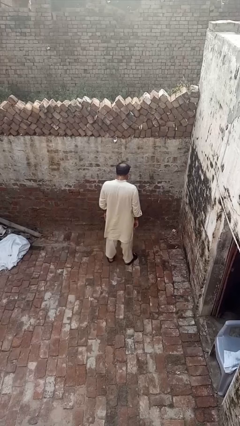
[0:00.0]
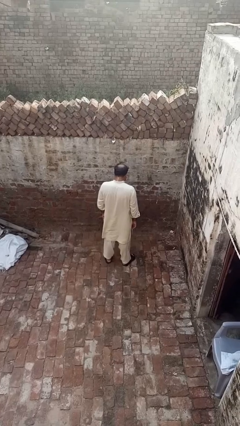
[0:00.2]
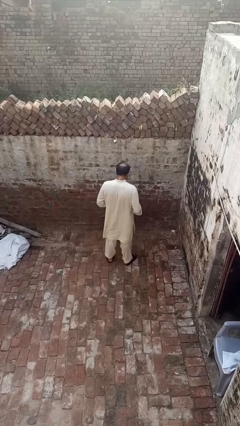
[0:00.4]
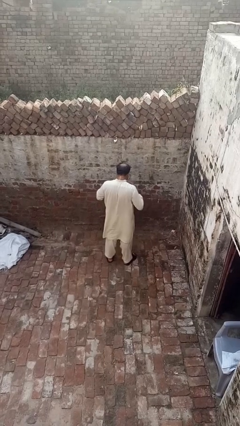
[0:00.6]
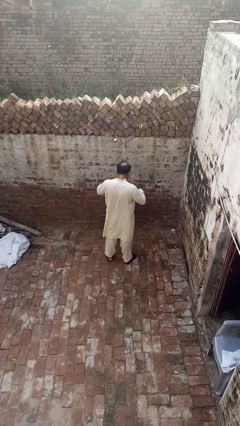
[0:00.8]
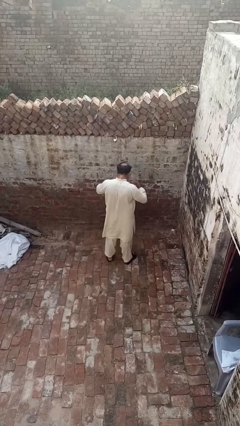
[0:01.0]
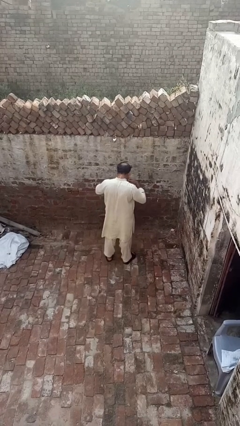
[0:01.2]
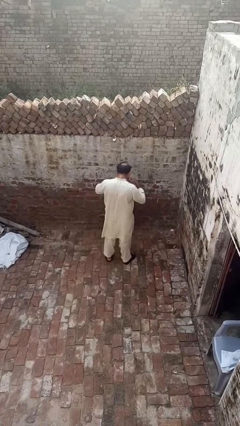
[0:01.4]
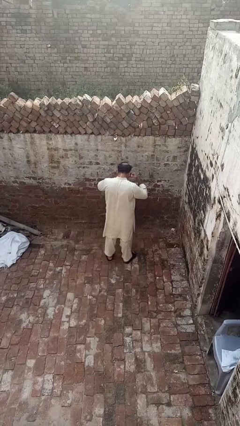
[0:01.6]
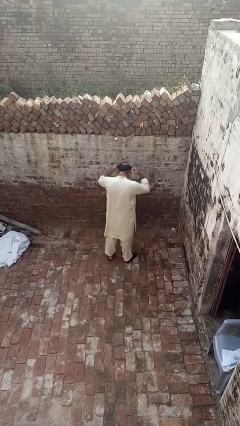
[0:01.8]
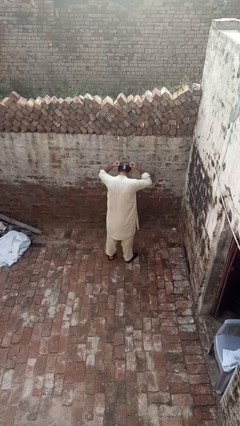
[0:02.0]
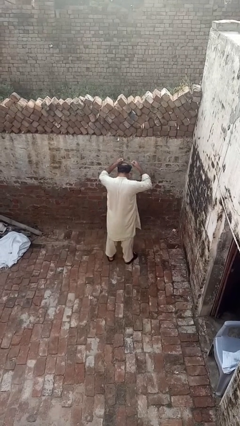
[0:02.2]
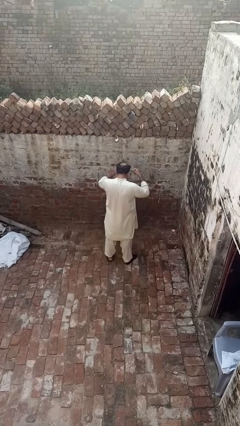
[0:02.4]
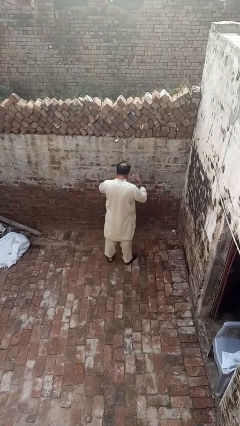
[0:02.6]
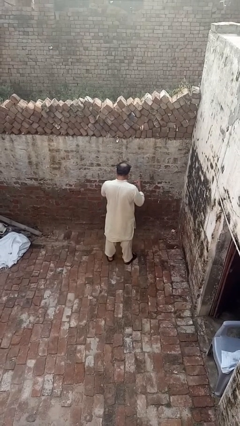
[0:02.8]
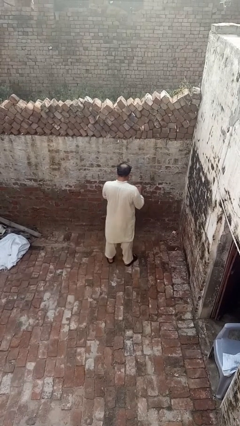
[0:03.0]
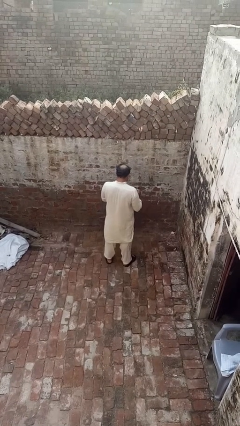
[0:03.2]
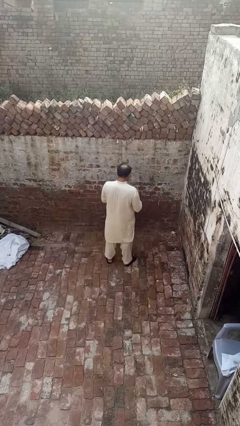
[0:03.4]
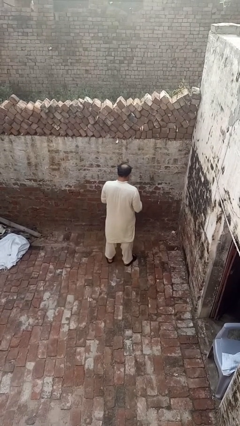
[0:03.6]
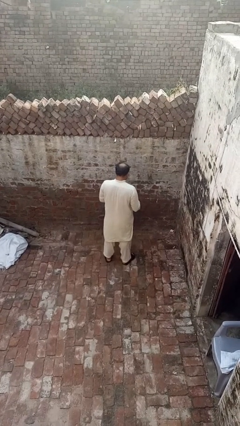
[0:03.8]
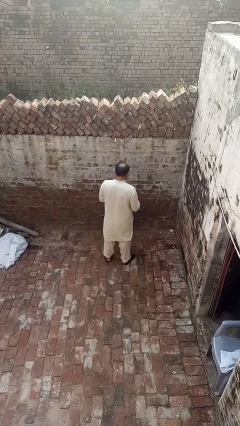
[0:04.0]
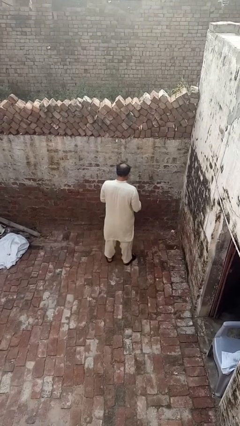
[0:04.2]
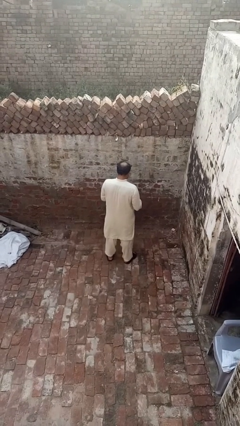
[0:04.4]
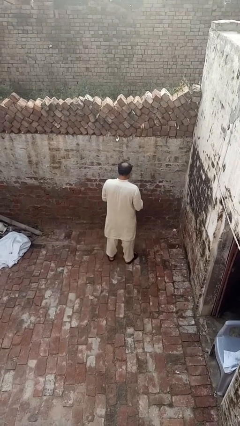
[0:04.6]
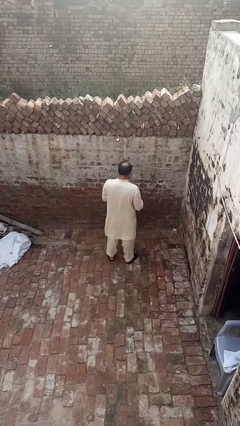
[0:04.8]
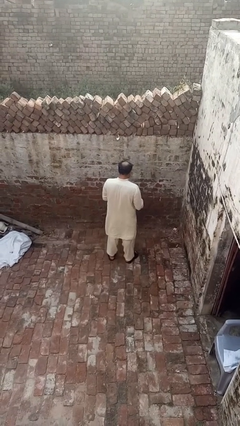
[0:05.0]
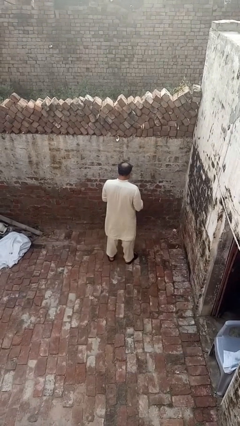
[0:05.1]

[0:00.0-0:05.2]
person takes off necklace

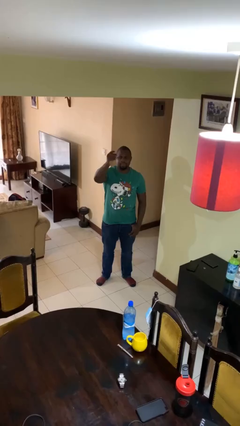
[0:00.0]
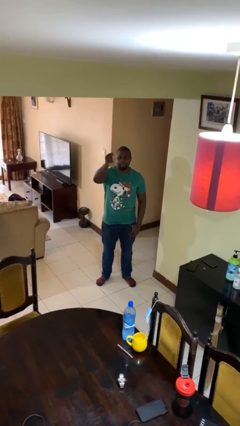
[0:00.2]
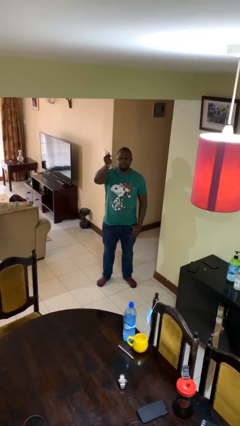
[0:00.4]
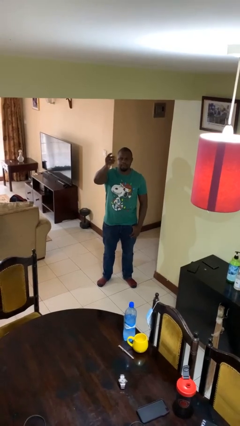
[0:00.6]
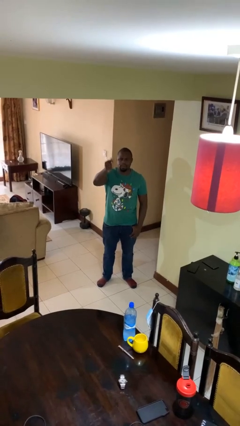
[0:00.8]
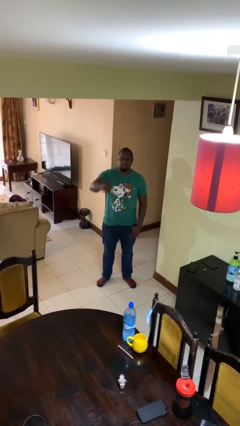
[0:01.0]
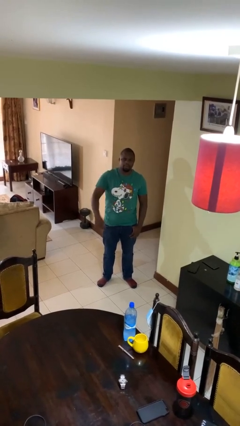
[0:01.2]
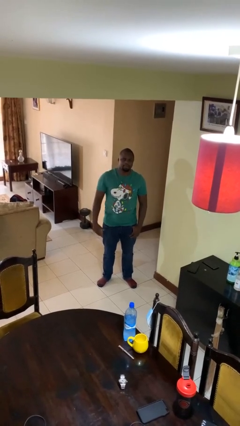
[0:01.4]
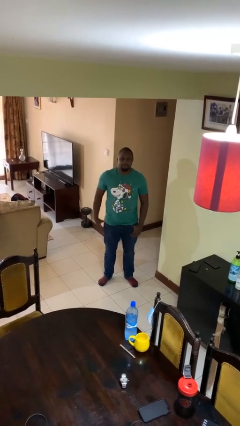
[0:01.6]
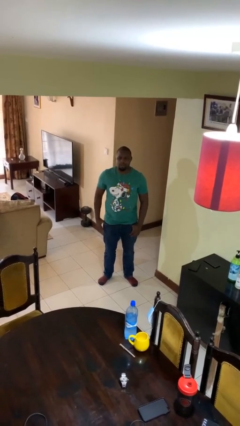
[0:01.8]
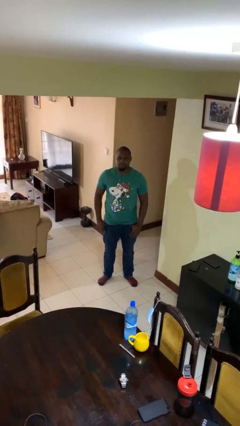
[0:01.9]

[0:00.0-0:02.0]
person snaps fingers

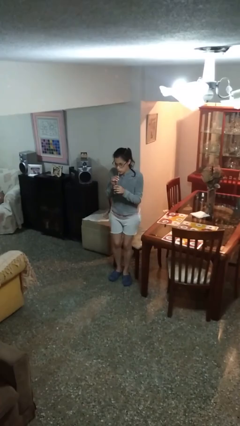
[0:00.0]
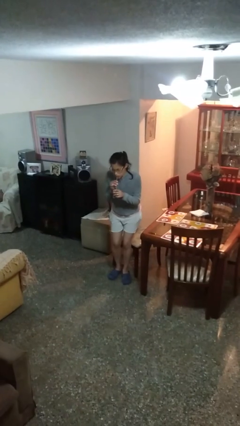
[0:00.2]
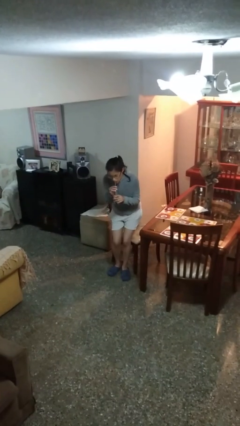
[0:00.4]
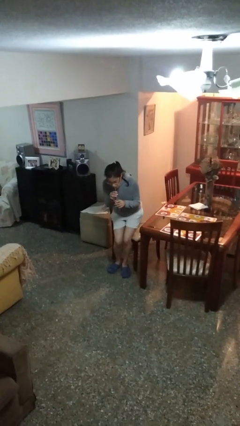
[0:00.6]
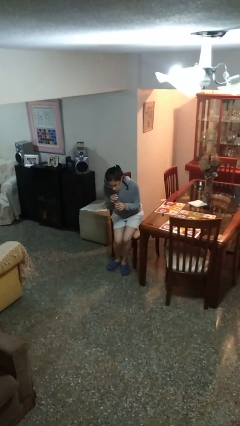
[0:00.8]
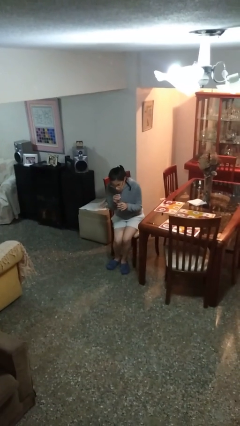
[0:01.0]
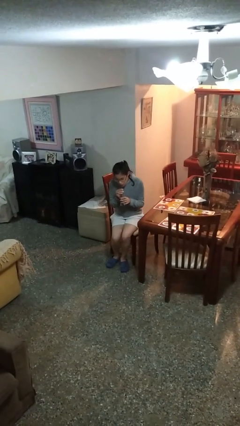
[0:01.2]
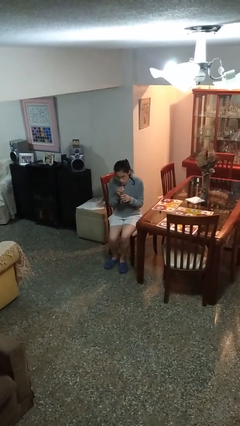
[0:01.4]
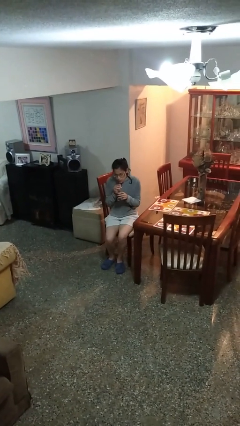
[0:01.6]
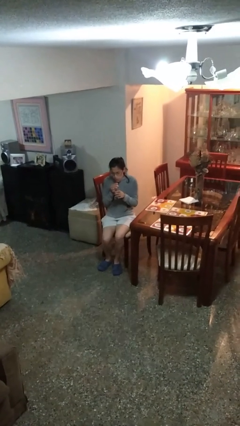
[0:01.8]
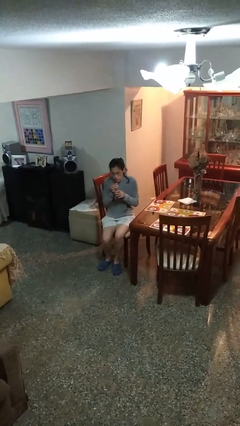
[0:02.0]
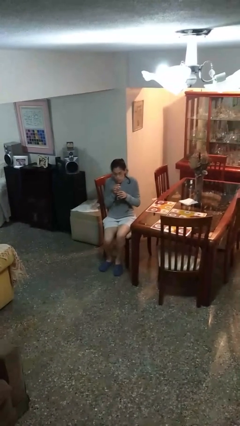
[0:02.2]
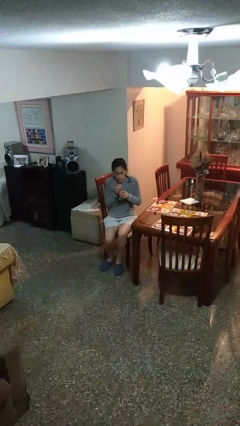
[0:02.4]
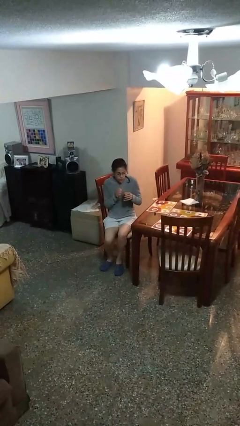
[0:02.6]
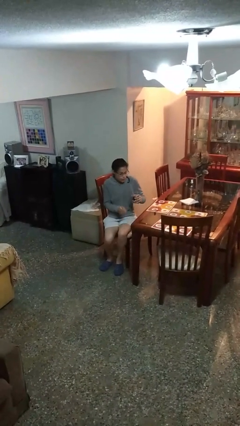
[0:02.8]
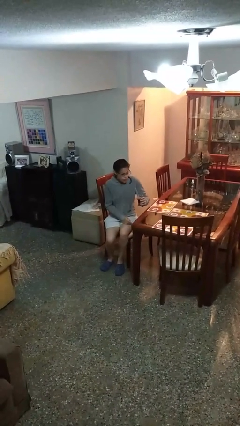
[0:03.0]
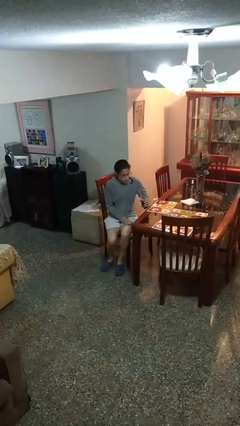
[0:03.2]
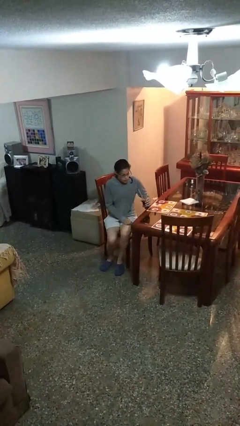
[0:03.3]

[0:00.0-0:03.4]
person drinks from straw

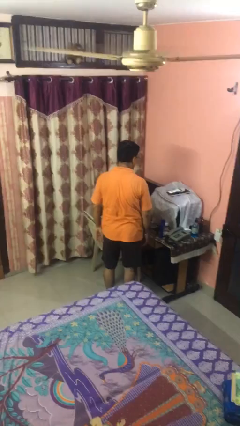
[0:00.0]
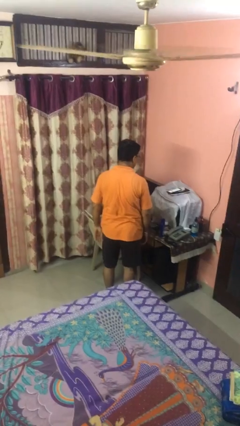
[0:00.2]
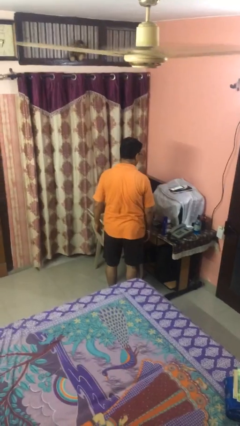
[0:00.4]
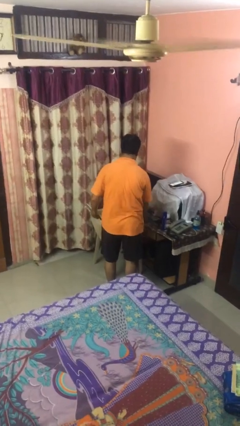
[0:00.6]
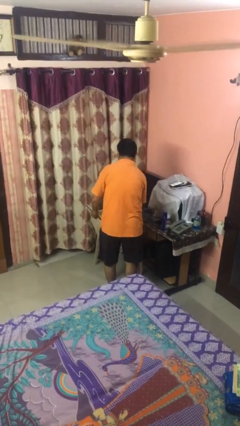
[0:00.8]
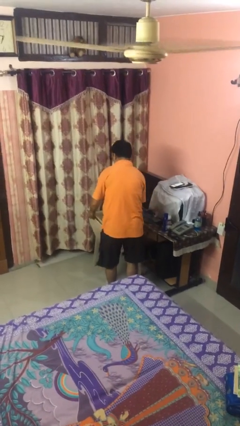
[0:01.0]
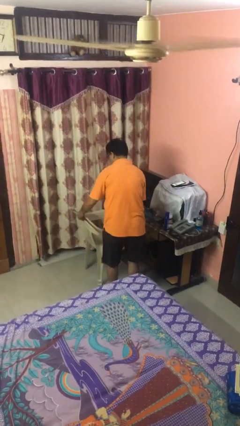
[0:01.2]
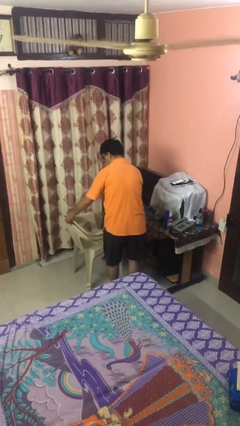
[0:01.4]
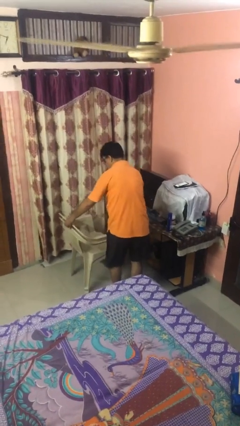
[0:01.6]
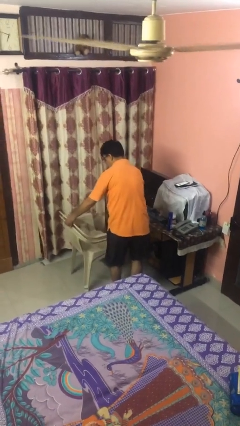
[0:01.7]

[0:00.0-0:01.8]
person pulls out chair

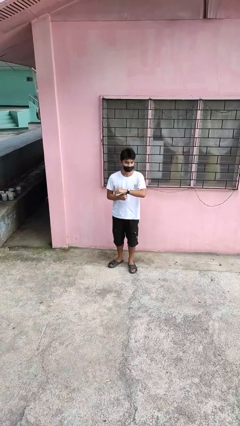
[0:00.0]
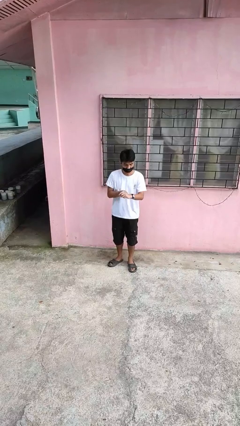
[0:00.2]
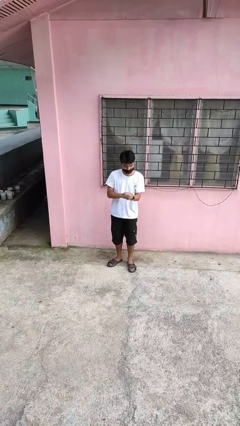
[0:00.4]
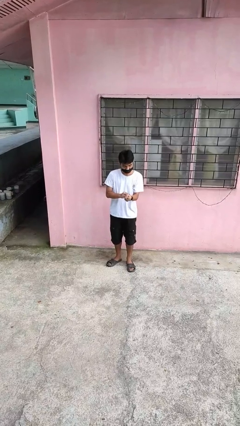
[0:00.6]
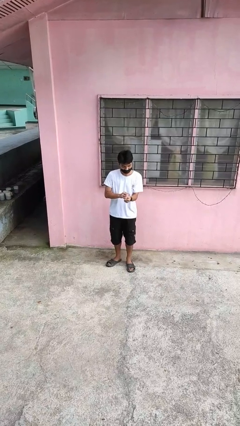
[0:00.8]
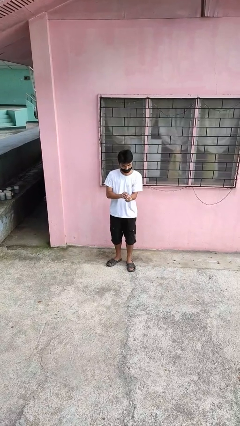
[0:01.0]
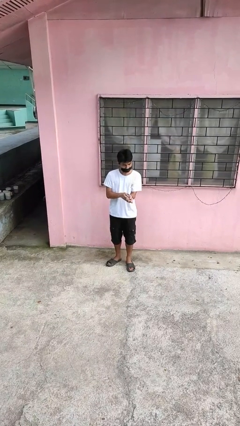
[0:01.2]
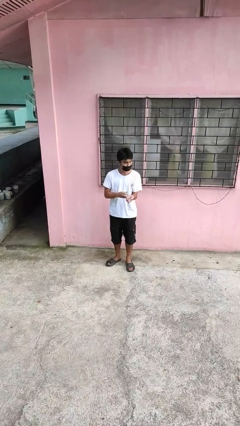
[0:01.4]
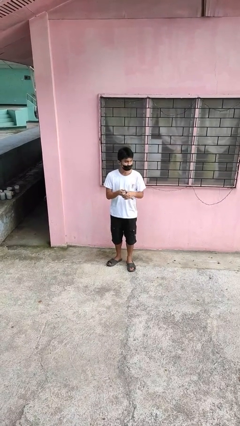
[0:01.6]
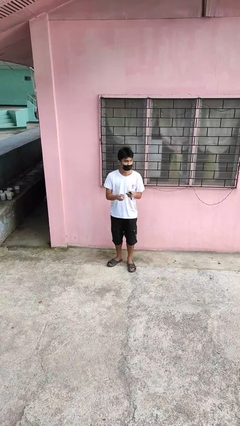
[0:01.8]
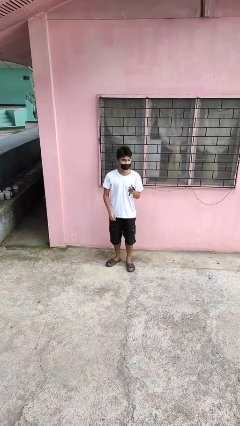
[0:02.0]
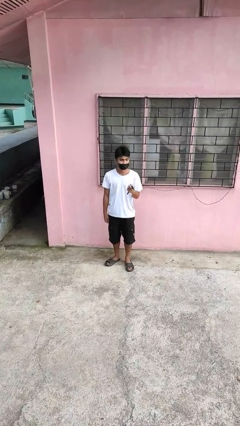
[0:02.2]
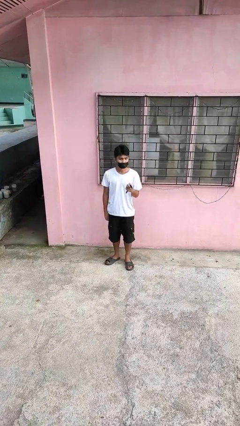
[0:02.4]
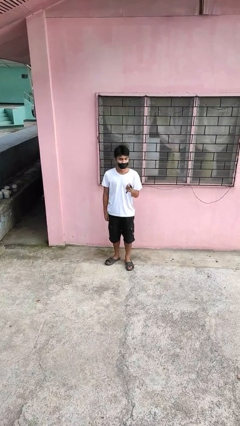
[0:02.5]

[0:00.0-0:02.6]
person takes off wristwatch

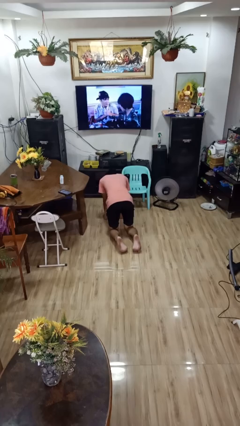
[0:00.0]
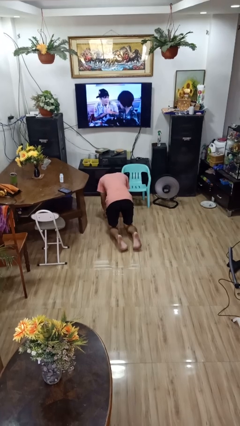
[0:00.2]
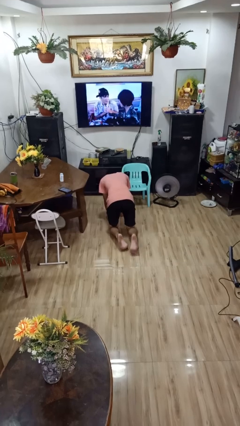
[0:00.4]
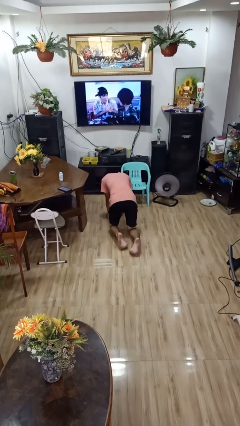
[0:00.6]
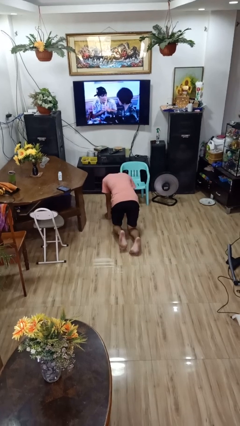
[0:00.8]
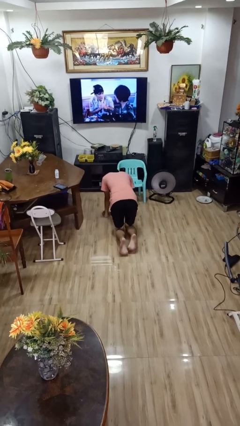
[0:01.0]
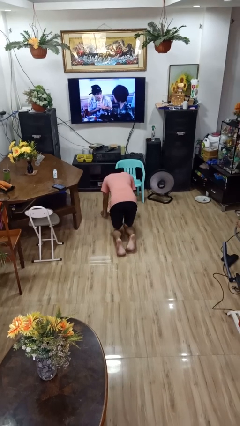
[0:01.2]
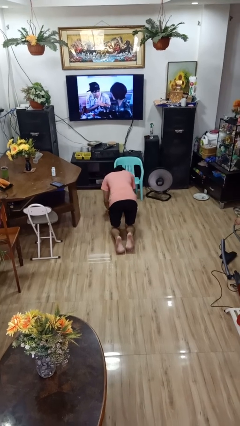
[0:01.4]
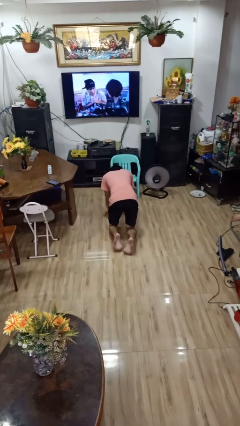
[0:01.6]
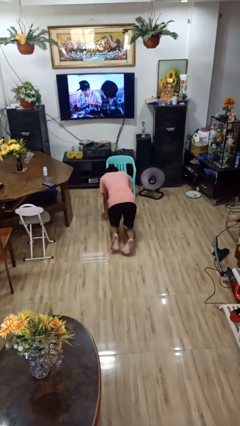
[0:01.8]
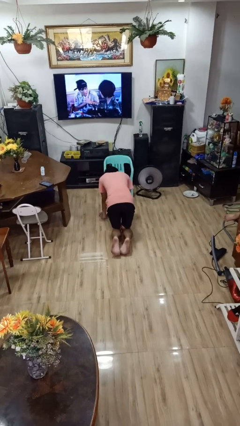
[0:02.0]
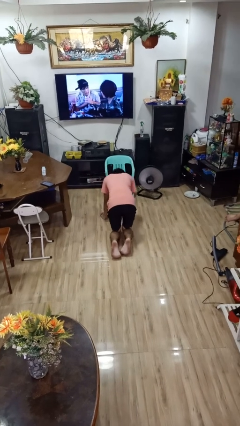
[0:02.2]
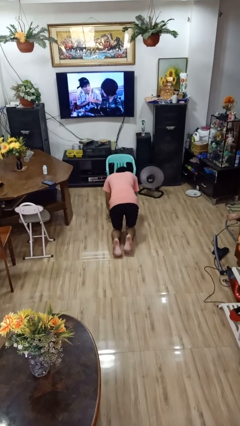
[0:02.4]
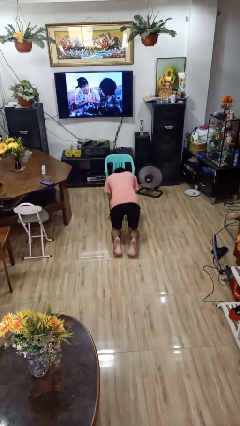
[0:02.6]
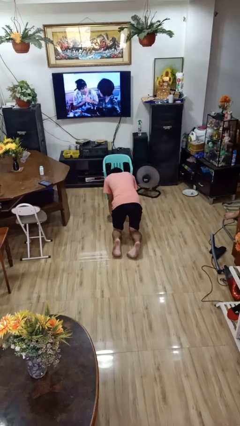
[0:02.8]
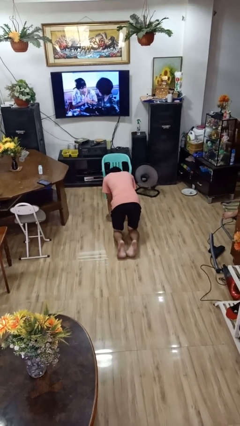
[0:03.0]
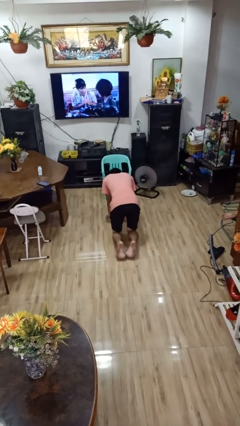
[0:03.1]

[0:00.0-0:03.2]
person crawls
